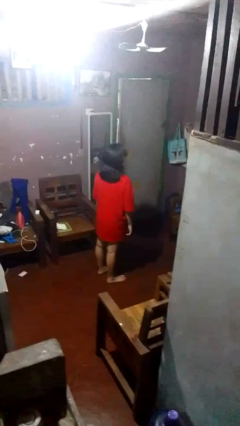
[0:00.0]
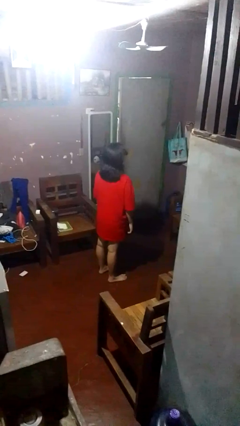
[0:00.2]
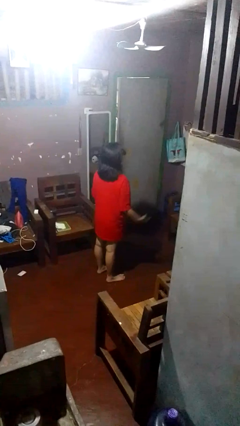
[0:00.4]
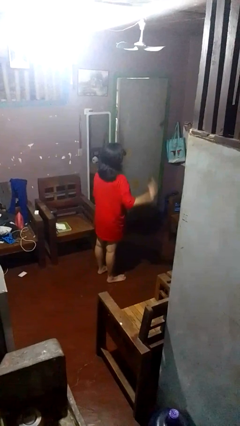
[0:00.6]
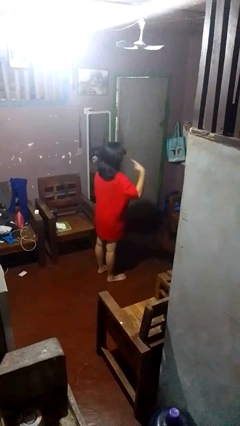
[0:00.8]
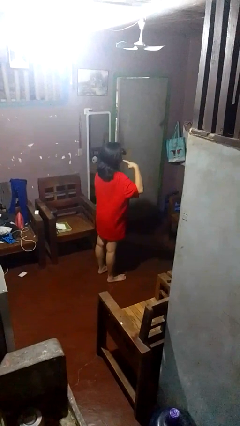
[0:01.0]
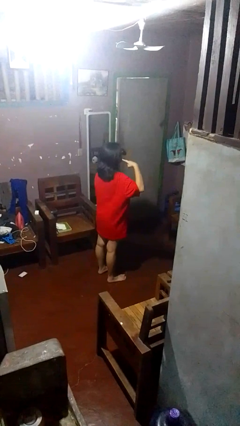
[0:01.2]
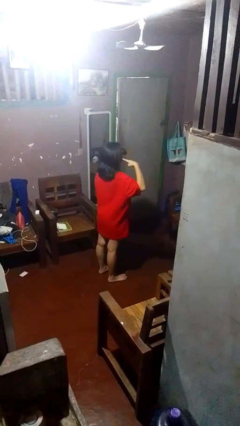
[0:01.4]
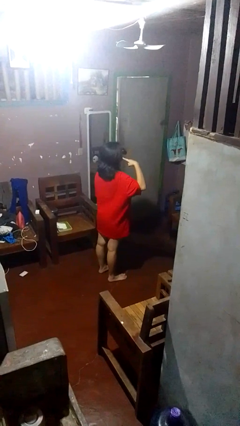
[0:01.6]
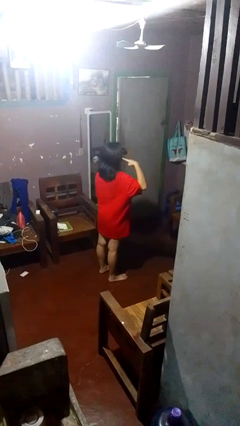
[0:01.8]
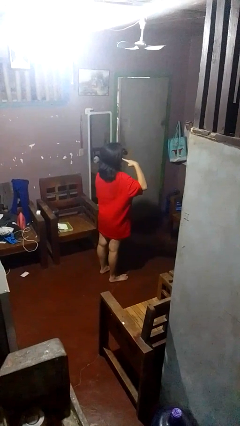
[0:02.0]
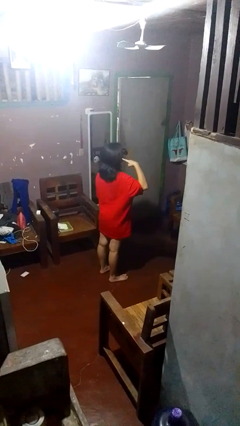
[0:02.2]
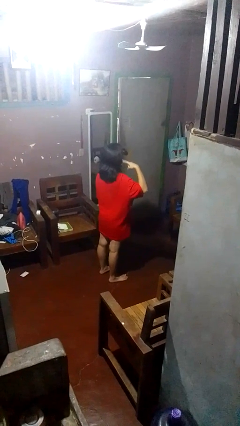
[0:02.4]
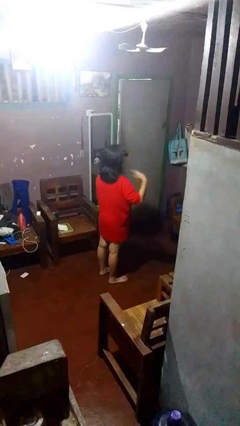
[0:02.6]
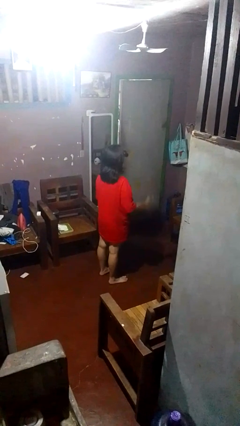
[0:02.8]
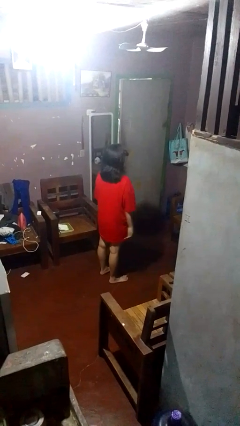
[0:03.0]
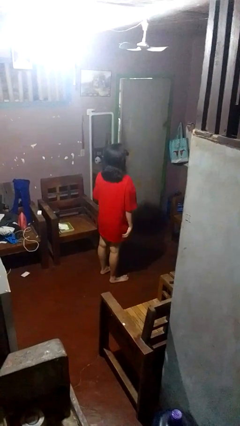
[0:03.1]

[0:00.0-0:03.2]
person gestures listen closely

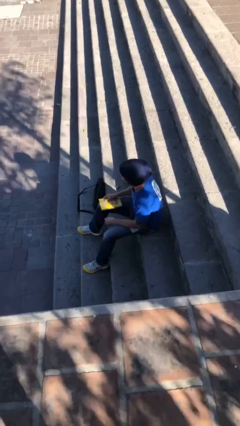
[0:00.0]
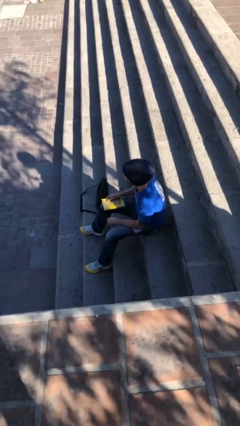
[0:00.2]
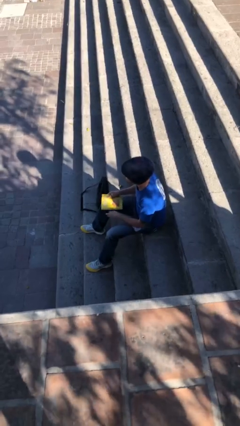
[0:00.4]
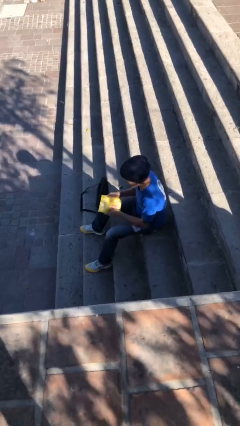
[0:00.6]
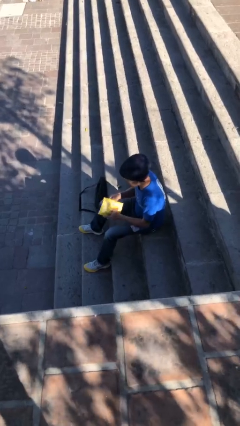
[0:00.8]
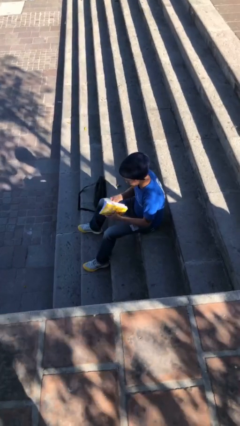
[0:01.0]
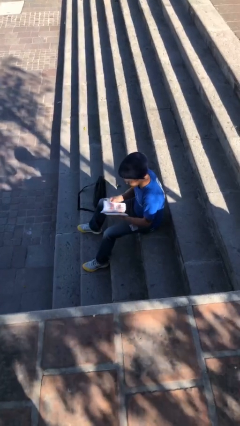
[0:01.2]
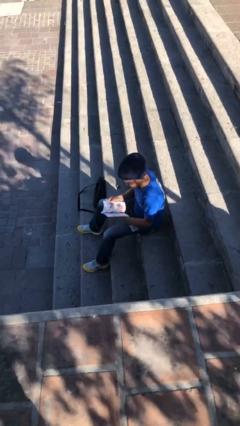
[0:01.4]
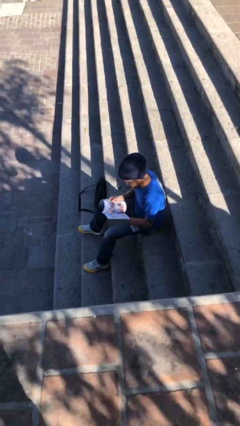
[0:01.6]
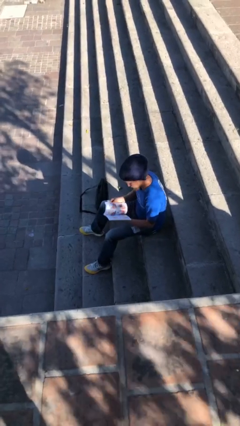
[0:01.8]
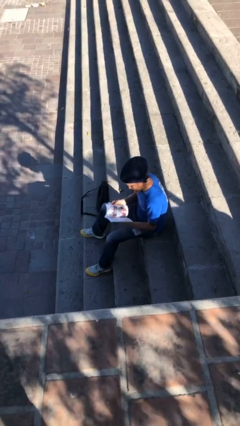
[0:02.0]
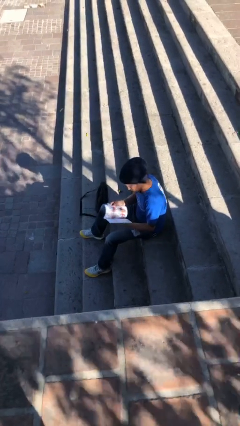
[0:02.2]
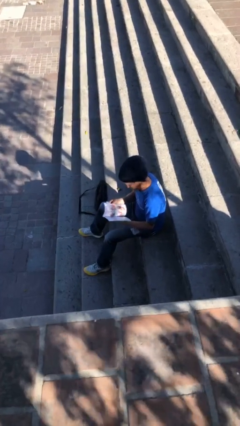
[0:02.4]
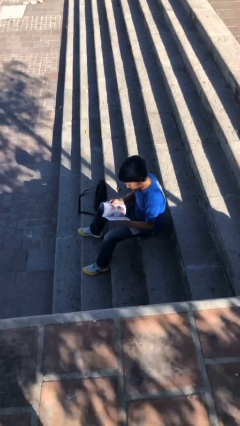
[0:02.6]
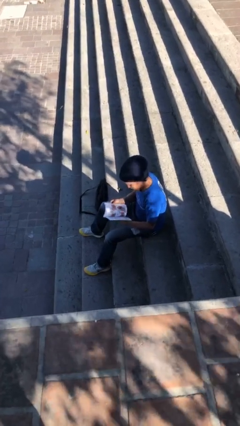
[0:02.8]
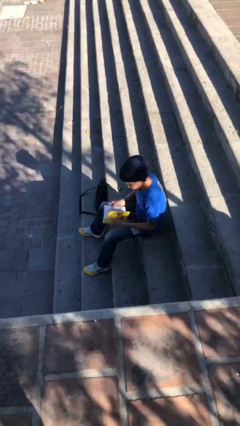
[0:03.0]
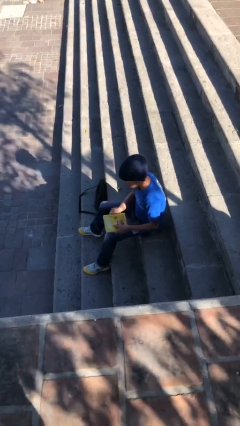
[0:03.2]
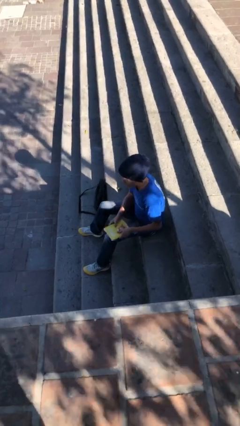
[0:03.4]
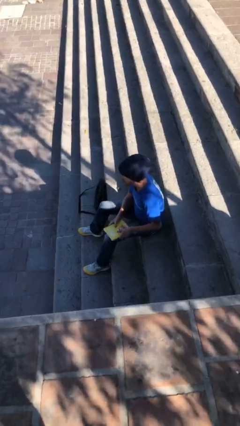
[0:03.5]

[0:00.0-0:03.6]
person reads document

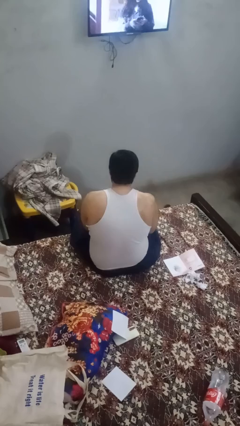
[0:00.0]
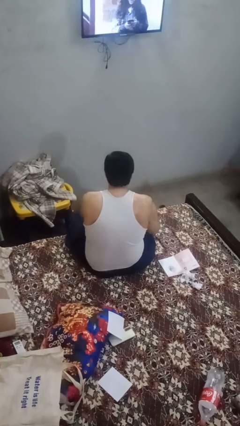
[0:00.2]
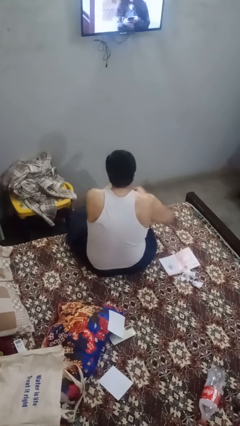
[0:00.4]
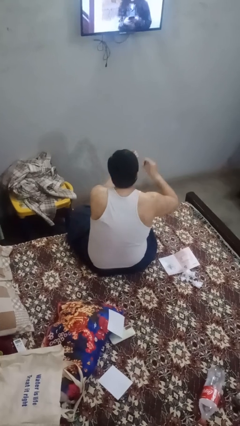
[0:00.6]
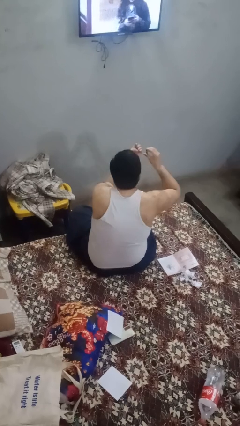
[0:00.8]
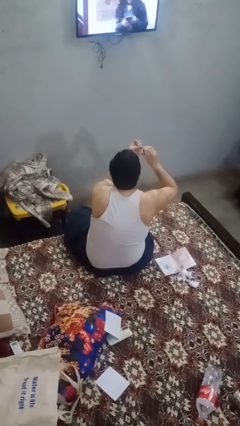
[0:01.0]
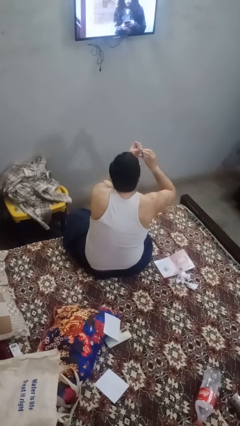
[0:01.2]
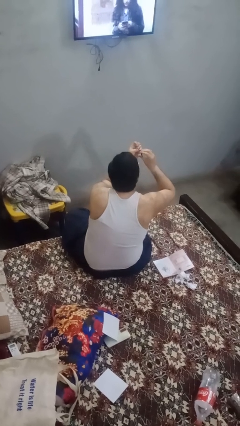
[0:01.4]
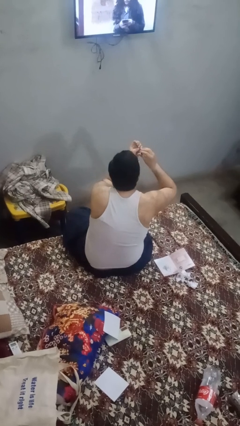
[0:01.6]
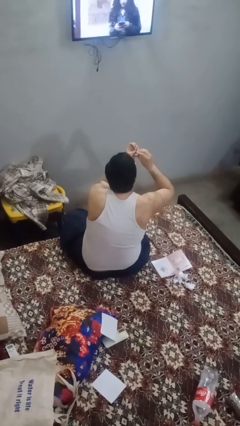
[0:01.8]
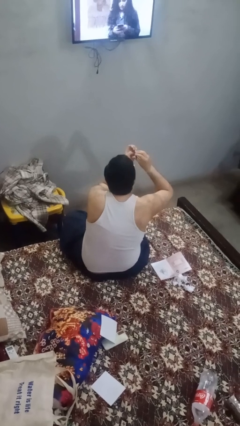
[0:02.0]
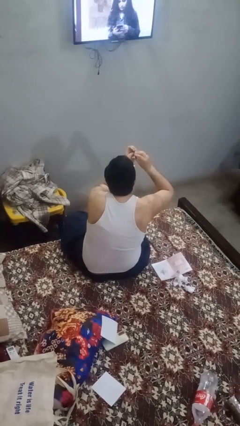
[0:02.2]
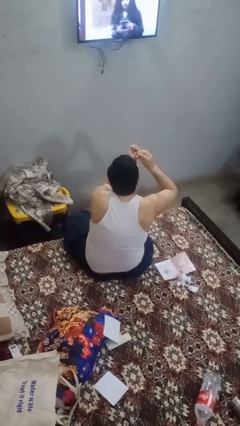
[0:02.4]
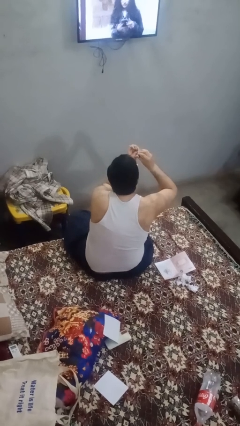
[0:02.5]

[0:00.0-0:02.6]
person clips fingernails

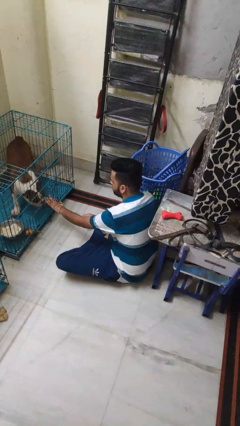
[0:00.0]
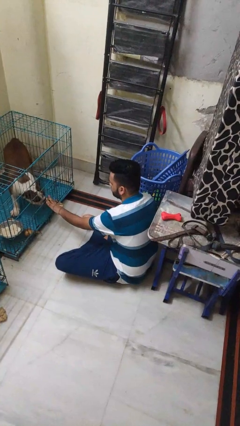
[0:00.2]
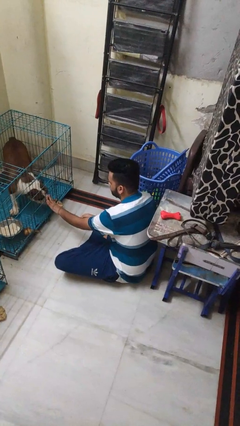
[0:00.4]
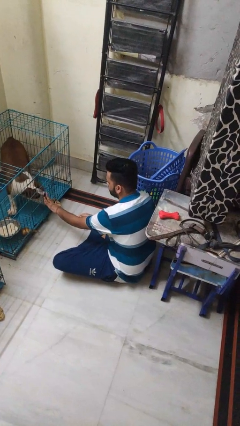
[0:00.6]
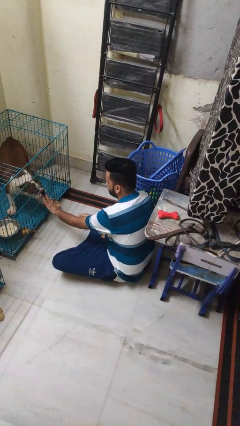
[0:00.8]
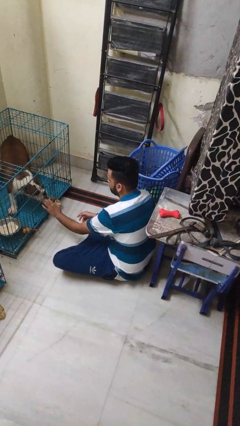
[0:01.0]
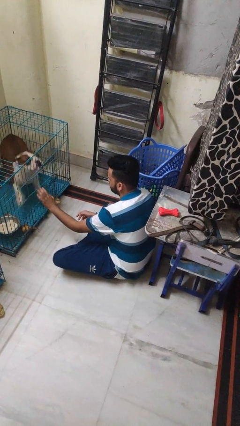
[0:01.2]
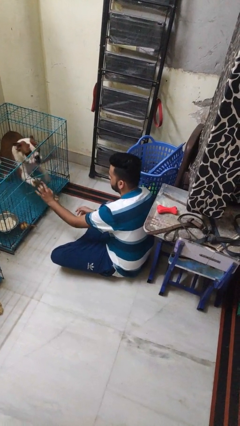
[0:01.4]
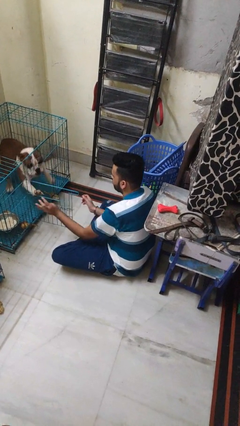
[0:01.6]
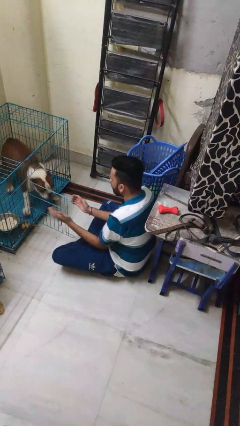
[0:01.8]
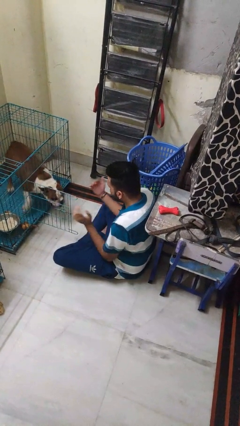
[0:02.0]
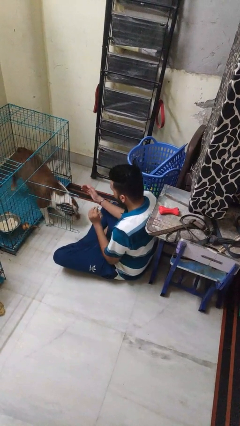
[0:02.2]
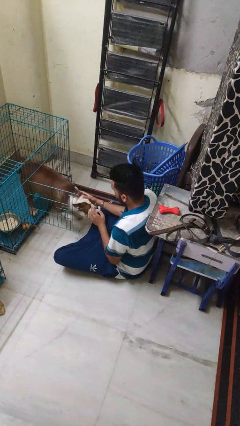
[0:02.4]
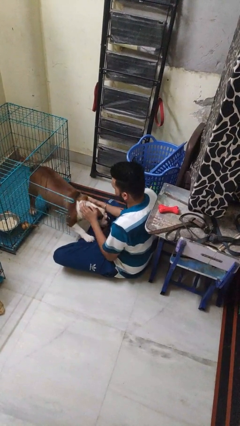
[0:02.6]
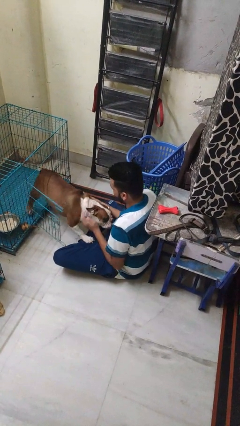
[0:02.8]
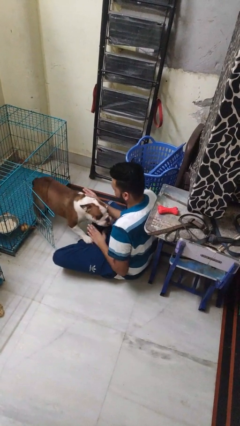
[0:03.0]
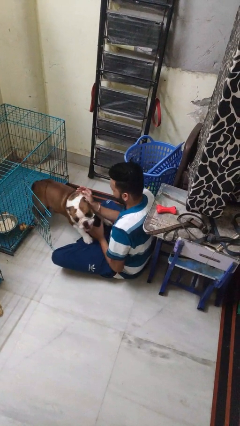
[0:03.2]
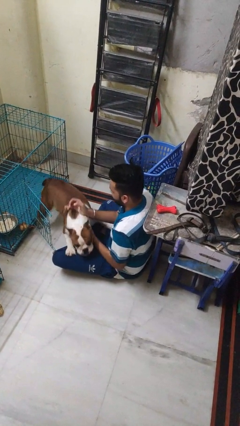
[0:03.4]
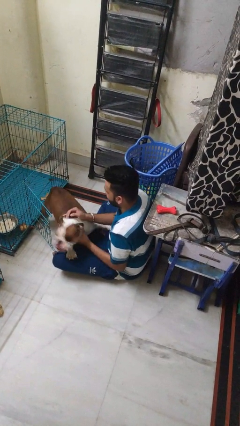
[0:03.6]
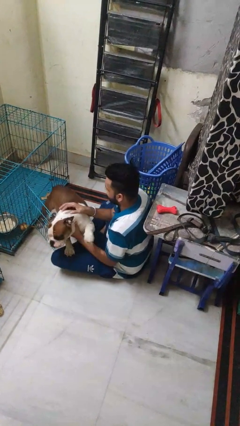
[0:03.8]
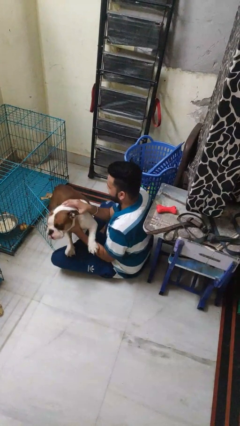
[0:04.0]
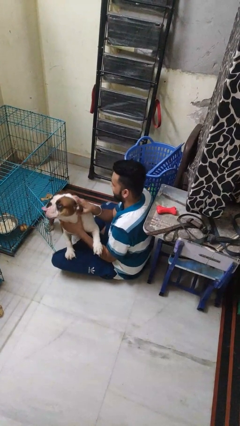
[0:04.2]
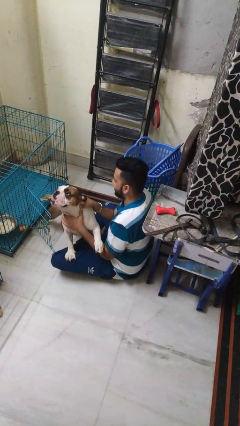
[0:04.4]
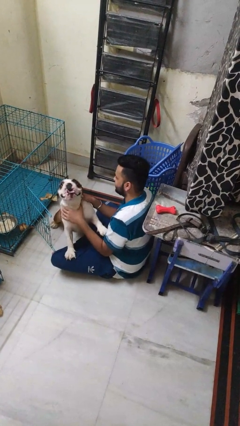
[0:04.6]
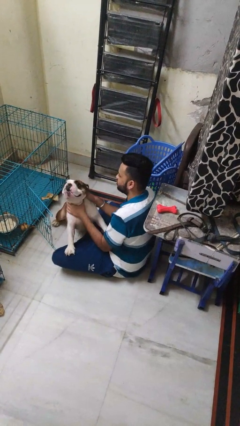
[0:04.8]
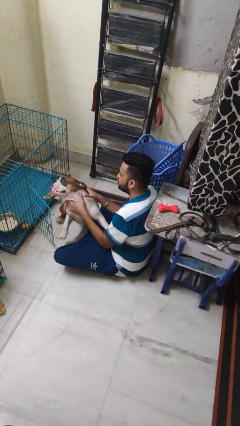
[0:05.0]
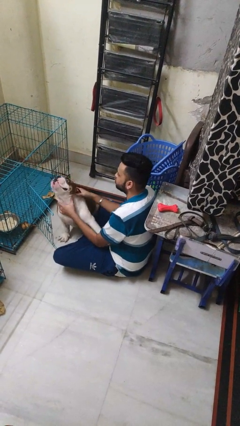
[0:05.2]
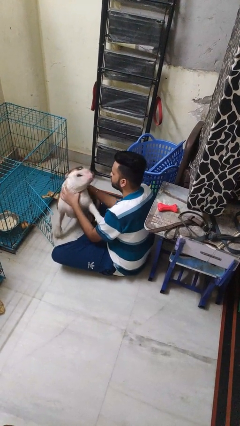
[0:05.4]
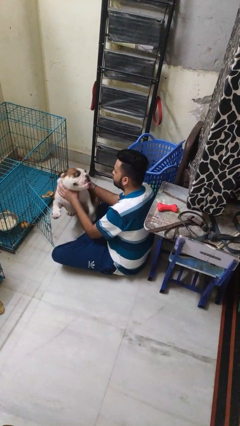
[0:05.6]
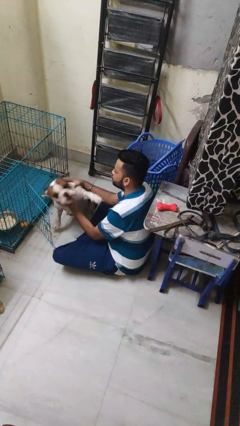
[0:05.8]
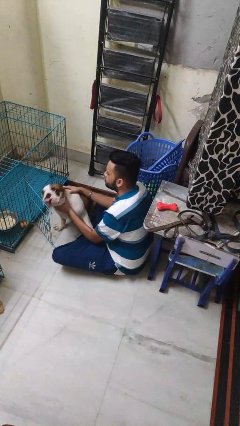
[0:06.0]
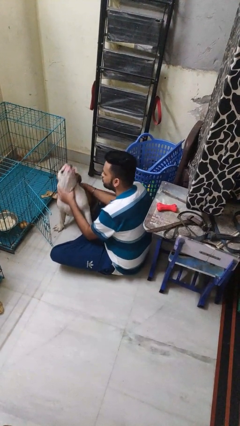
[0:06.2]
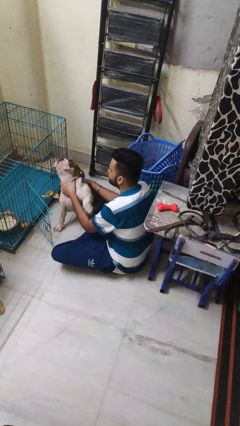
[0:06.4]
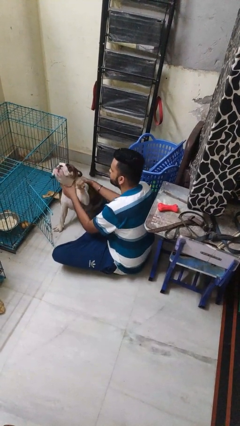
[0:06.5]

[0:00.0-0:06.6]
person uncrates dog

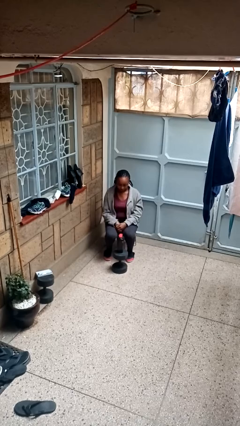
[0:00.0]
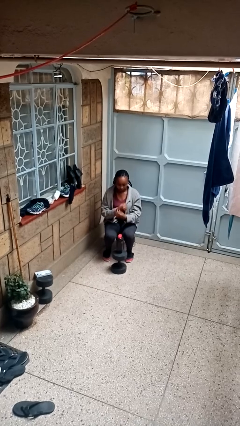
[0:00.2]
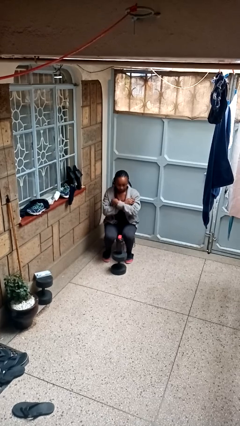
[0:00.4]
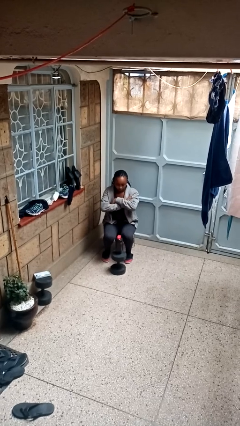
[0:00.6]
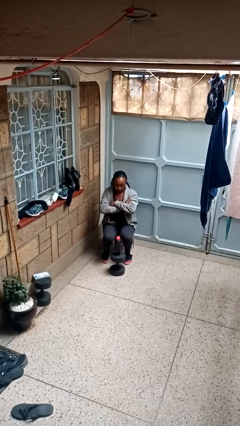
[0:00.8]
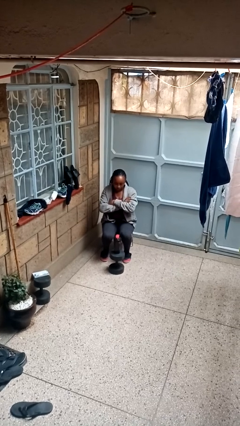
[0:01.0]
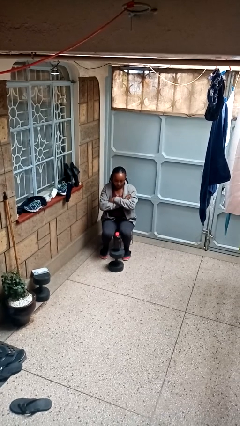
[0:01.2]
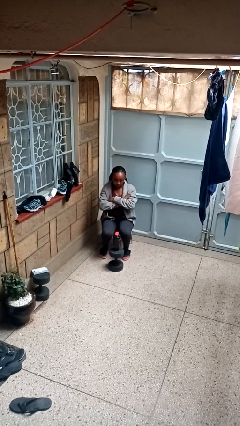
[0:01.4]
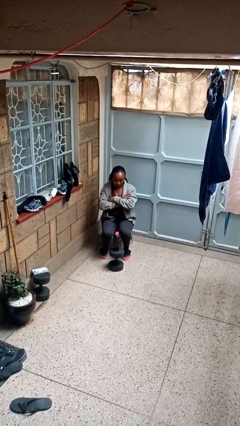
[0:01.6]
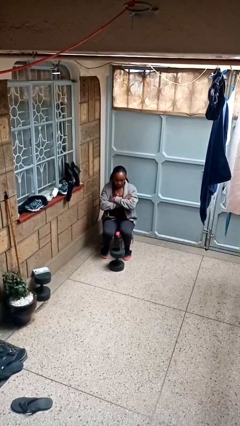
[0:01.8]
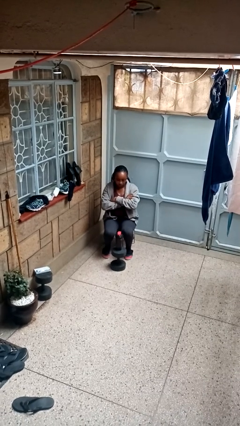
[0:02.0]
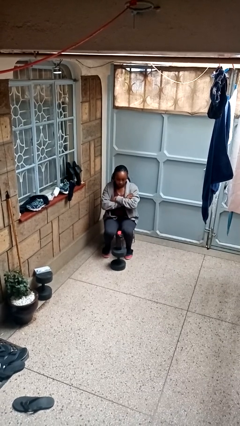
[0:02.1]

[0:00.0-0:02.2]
person gestures arms x
